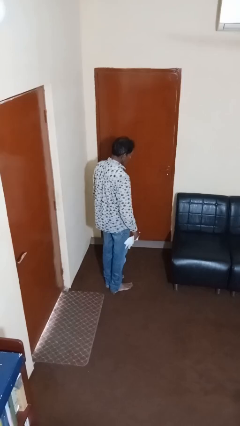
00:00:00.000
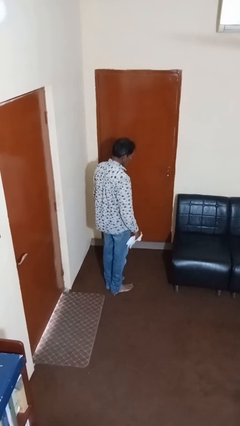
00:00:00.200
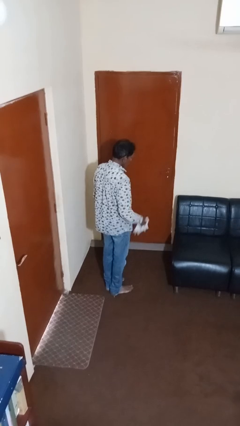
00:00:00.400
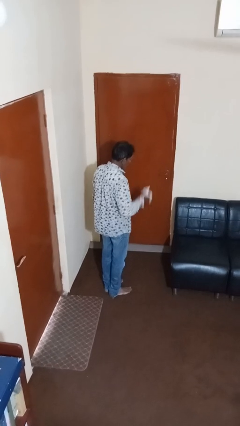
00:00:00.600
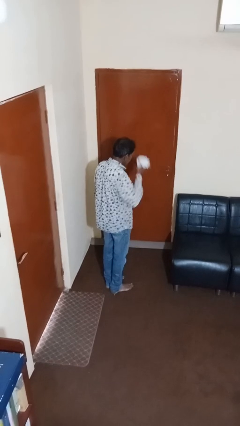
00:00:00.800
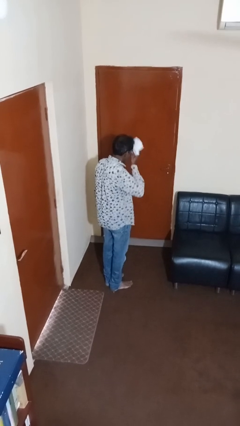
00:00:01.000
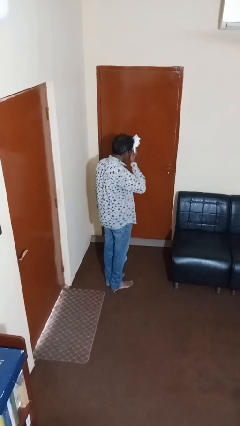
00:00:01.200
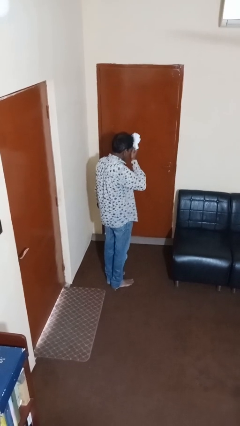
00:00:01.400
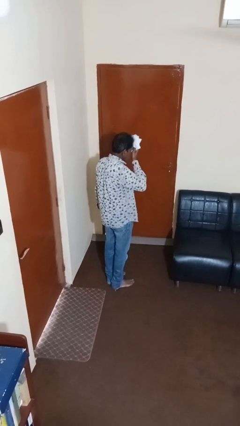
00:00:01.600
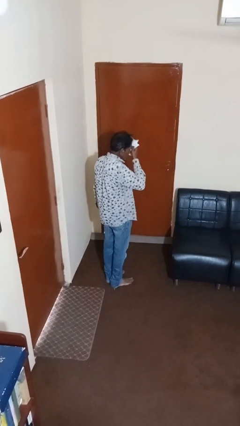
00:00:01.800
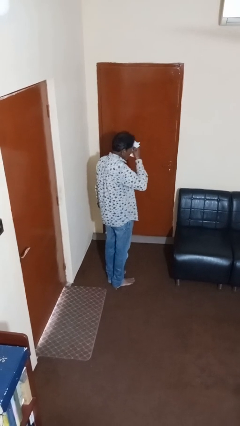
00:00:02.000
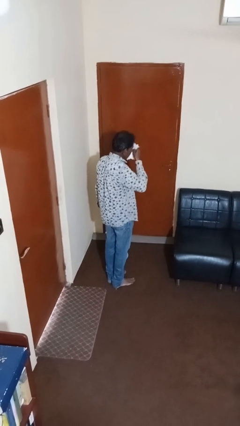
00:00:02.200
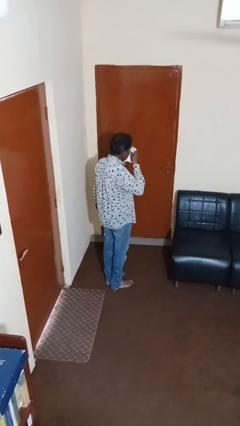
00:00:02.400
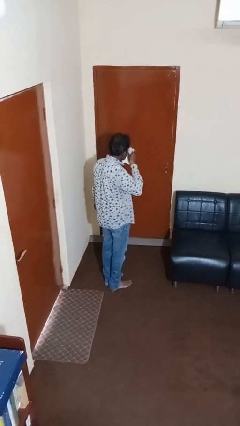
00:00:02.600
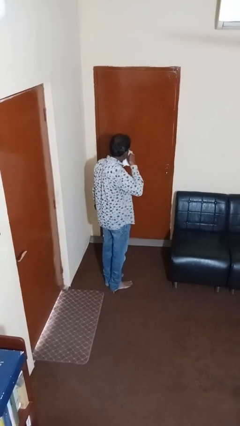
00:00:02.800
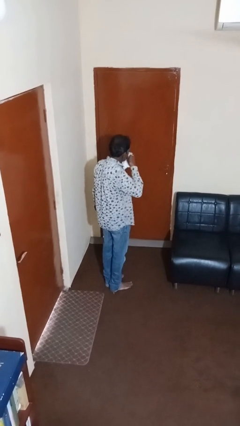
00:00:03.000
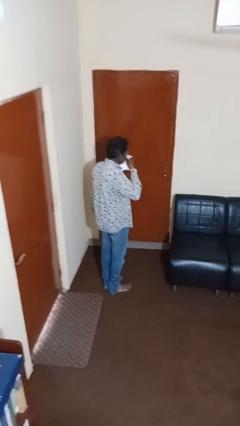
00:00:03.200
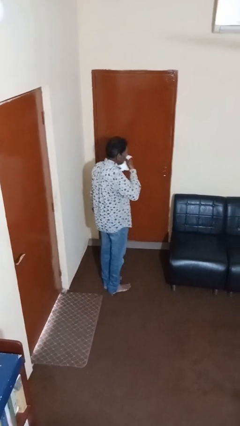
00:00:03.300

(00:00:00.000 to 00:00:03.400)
person wipes mouth with napkin

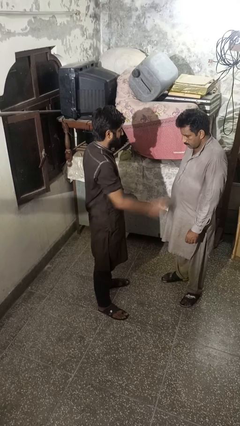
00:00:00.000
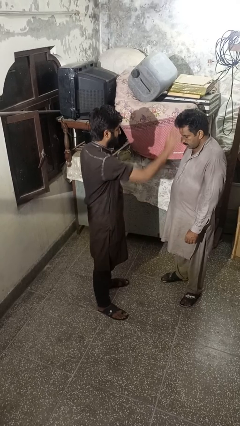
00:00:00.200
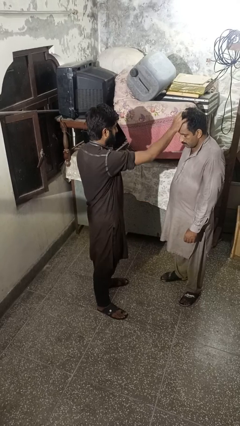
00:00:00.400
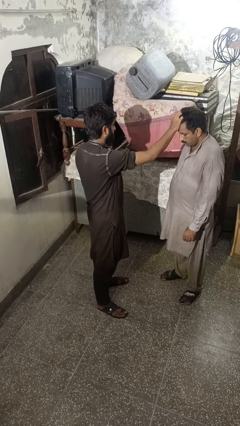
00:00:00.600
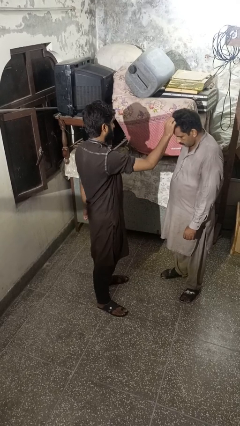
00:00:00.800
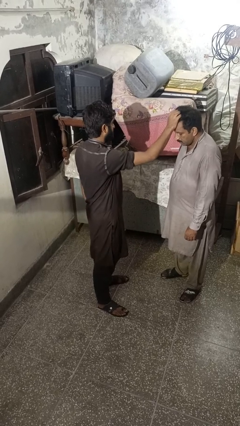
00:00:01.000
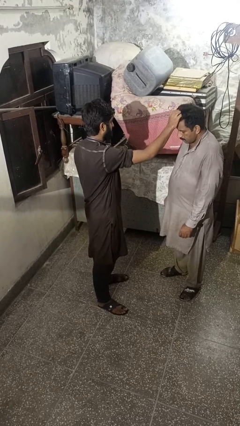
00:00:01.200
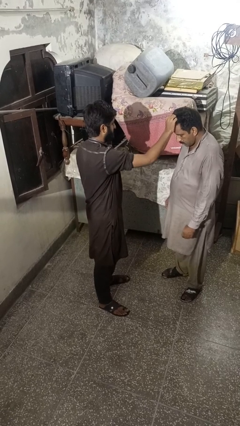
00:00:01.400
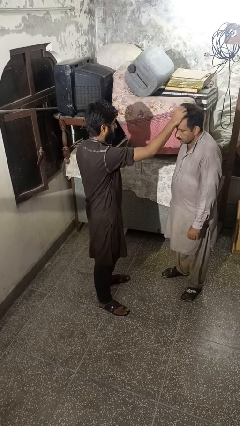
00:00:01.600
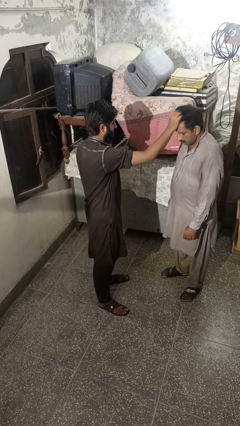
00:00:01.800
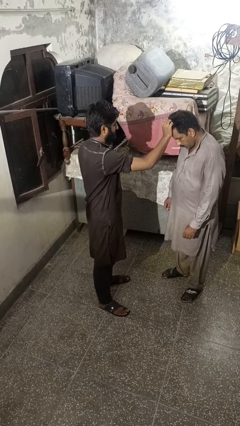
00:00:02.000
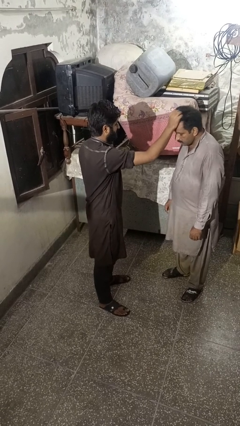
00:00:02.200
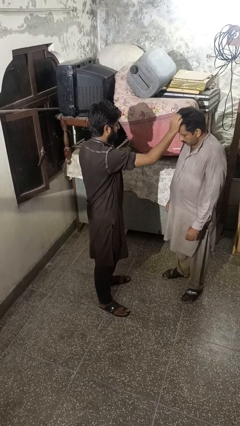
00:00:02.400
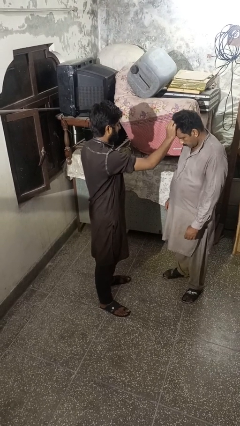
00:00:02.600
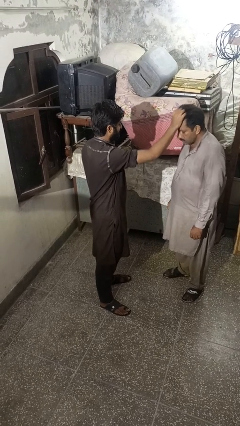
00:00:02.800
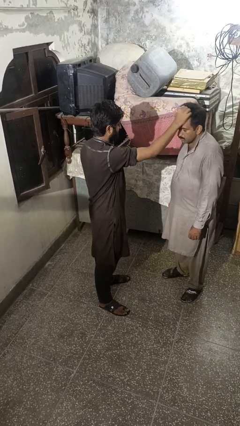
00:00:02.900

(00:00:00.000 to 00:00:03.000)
person grabs person by hair

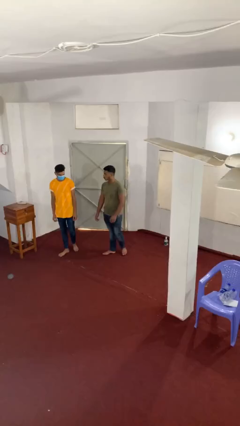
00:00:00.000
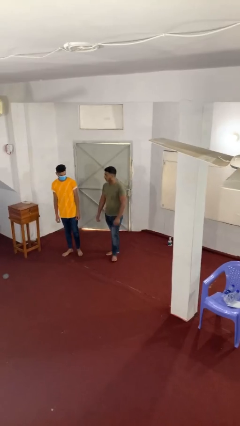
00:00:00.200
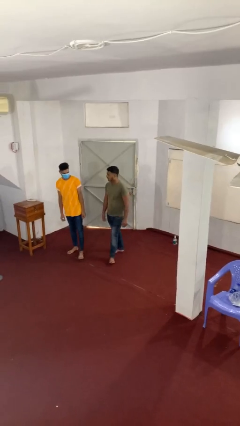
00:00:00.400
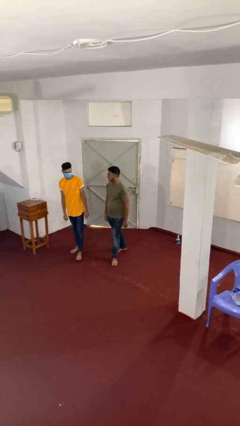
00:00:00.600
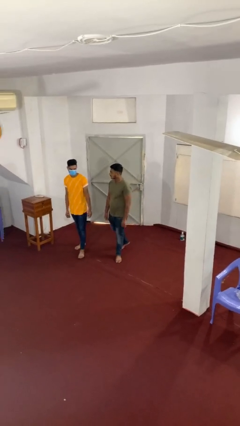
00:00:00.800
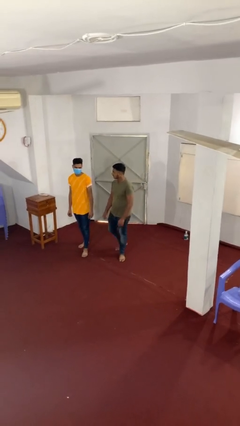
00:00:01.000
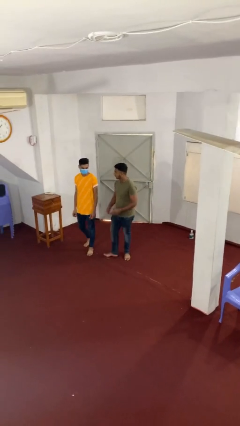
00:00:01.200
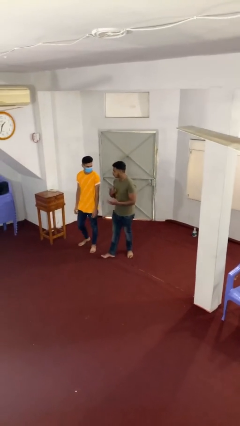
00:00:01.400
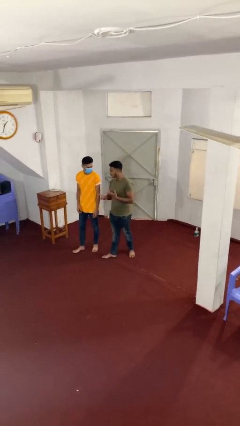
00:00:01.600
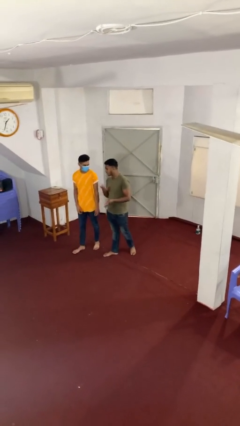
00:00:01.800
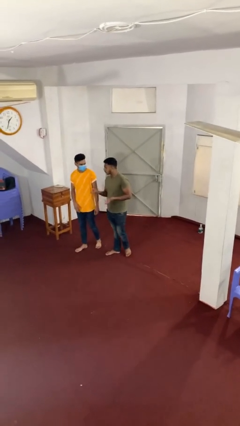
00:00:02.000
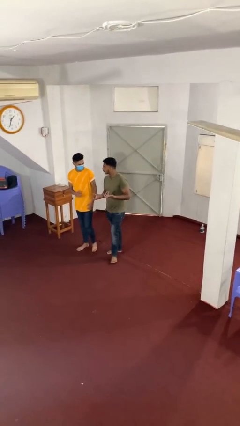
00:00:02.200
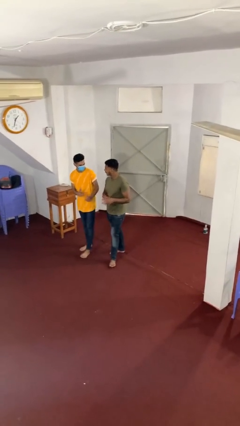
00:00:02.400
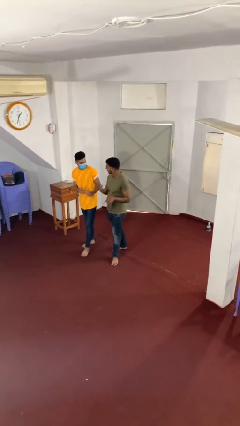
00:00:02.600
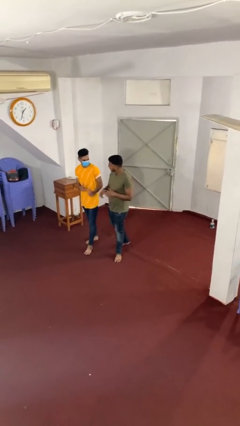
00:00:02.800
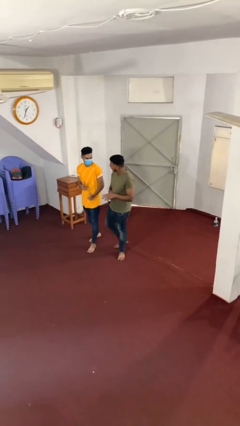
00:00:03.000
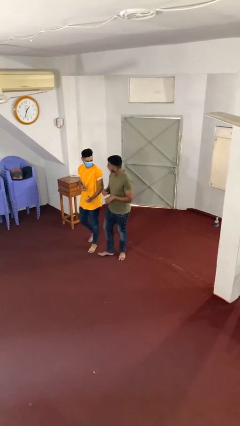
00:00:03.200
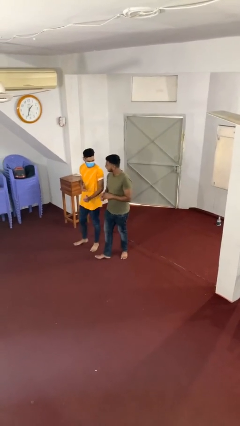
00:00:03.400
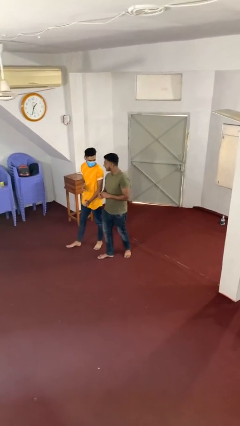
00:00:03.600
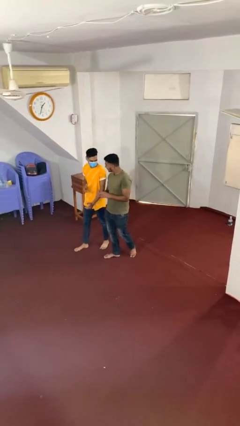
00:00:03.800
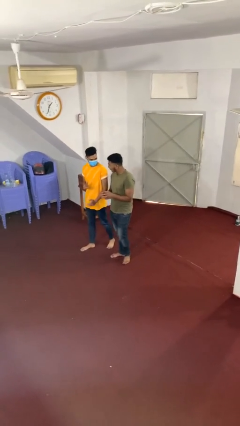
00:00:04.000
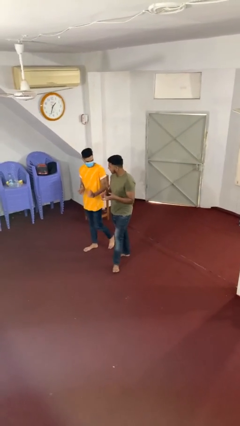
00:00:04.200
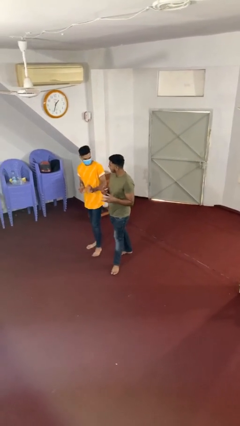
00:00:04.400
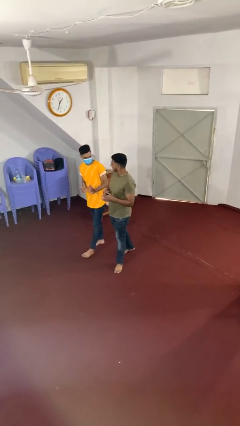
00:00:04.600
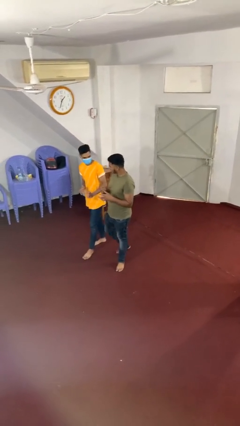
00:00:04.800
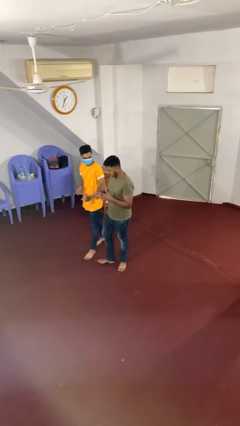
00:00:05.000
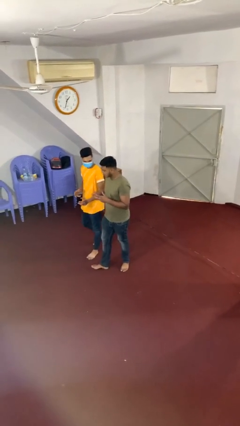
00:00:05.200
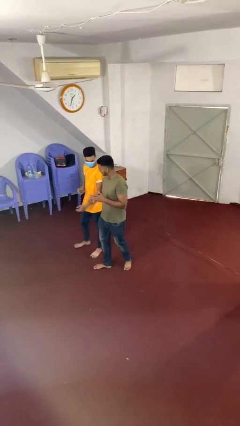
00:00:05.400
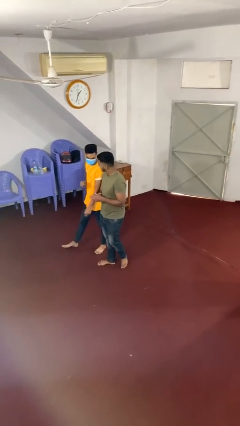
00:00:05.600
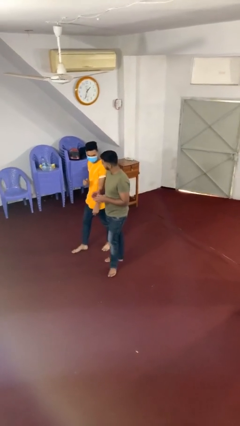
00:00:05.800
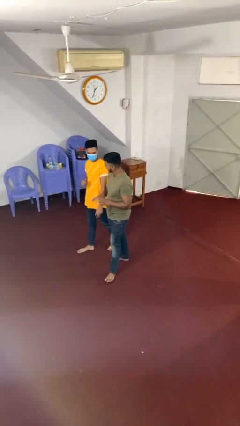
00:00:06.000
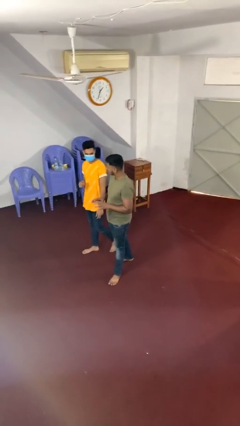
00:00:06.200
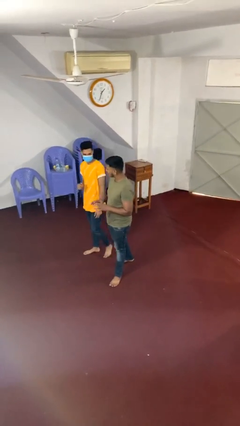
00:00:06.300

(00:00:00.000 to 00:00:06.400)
person talks to person

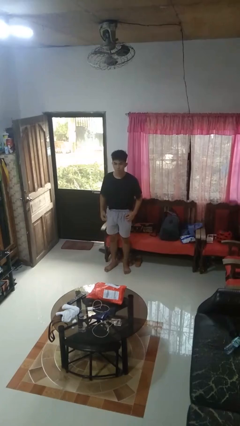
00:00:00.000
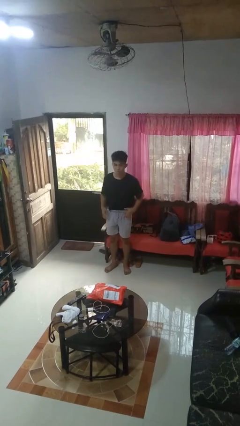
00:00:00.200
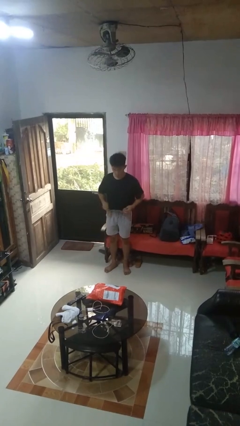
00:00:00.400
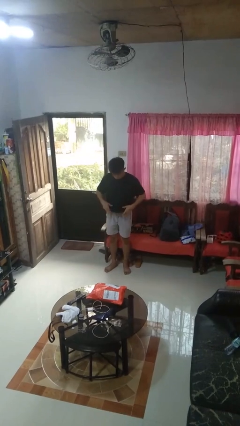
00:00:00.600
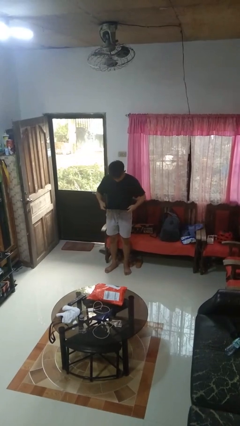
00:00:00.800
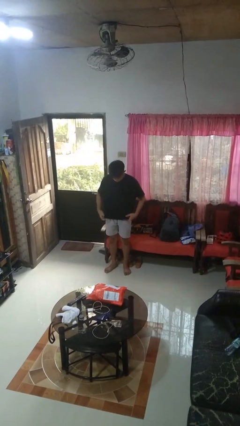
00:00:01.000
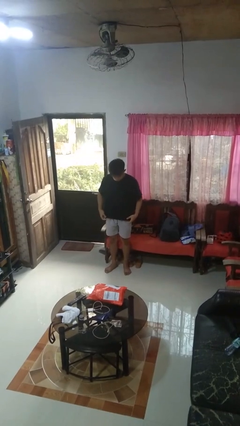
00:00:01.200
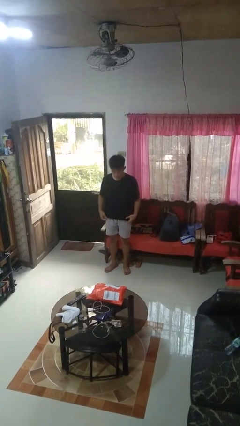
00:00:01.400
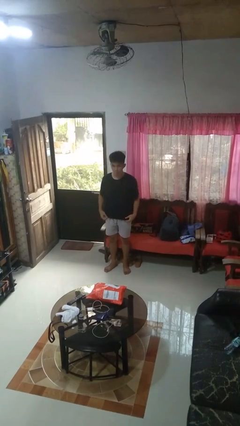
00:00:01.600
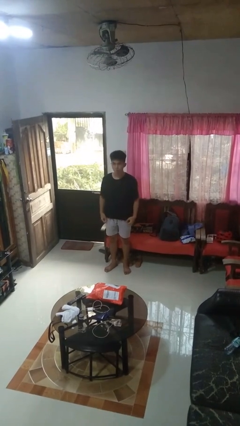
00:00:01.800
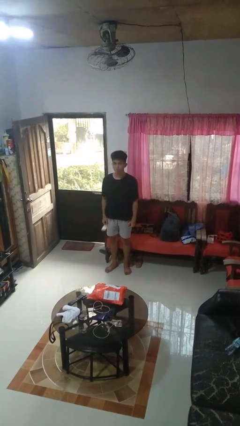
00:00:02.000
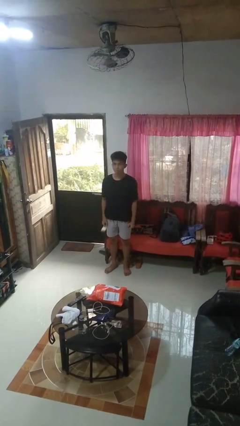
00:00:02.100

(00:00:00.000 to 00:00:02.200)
person untucks shirt

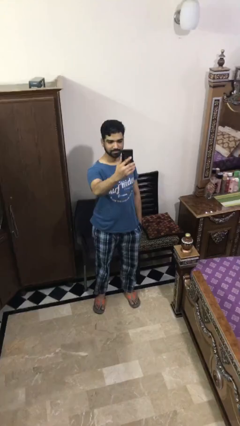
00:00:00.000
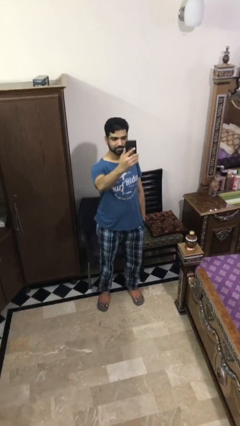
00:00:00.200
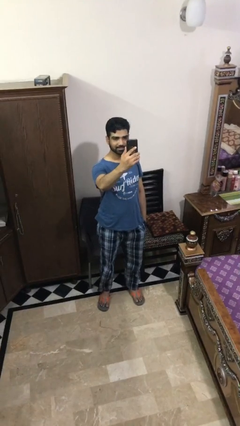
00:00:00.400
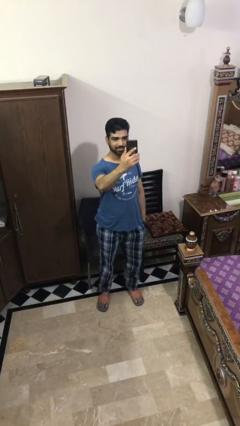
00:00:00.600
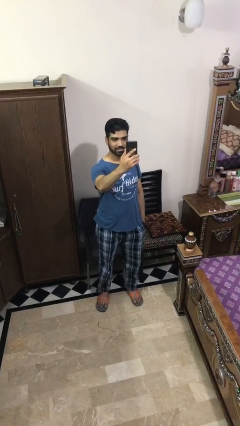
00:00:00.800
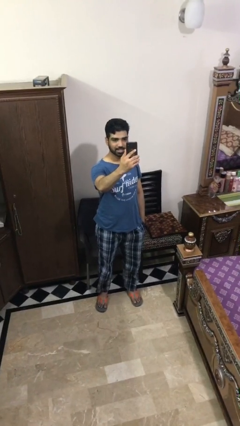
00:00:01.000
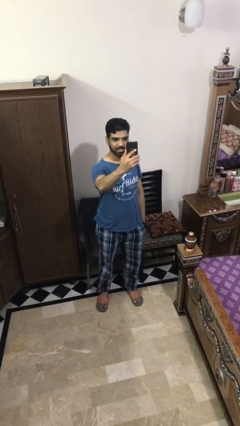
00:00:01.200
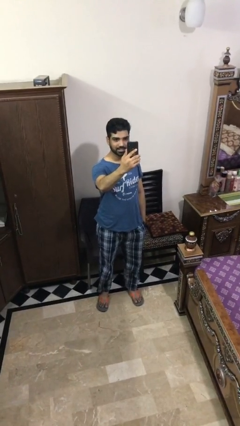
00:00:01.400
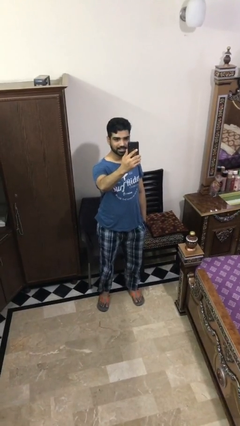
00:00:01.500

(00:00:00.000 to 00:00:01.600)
person takes selfie

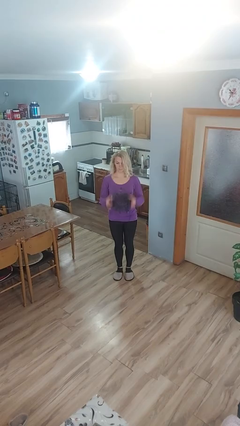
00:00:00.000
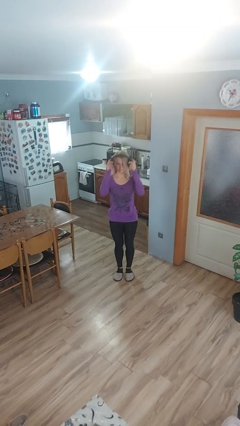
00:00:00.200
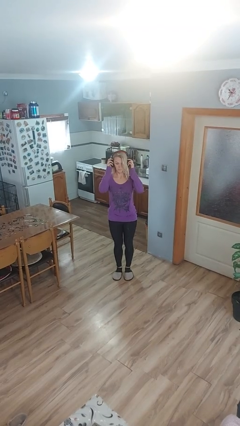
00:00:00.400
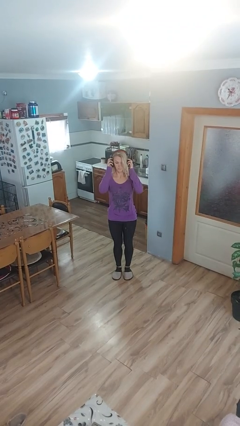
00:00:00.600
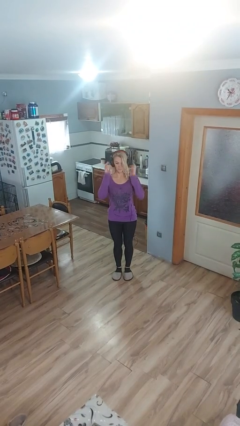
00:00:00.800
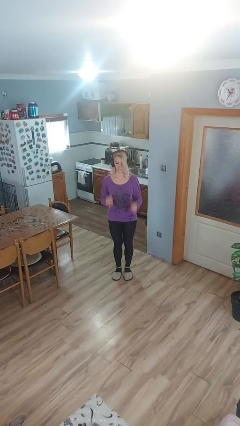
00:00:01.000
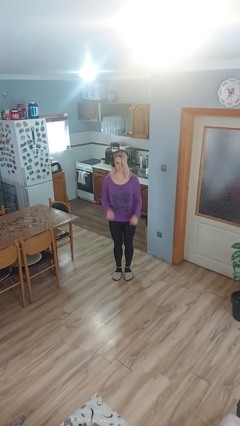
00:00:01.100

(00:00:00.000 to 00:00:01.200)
person puts on headphones
